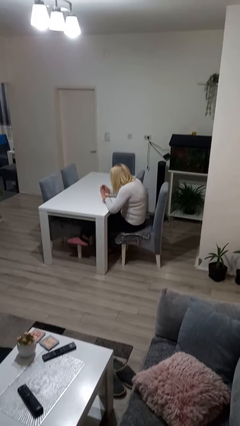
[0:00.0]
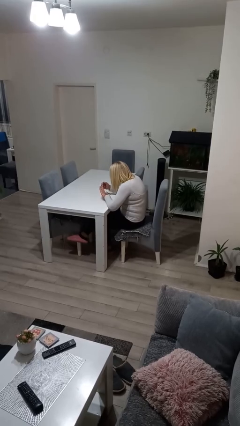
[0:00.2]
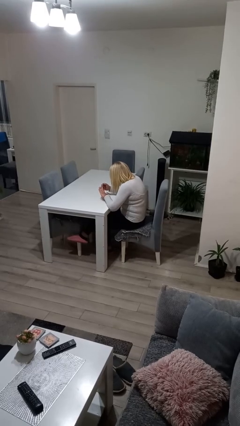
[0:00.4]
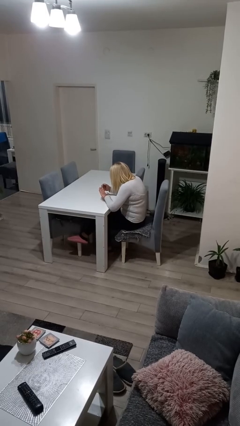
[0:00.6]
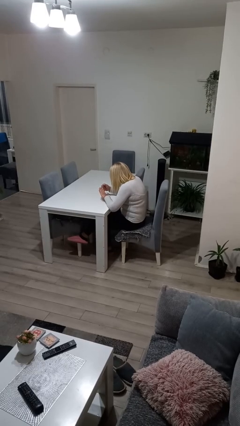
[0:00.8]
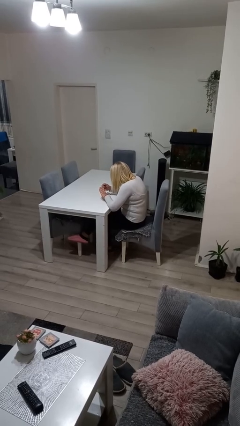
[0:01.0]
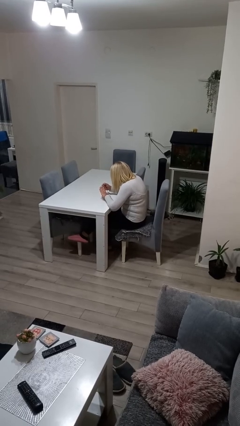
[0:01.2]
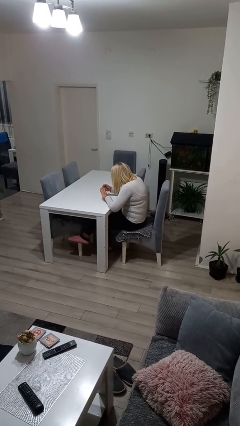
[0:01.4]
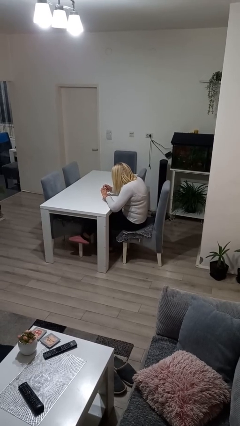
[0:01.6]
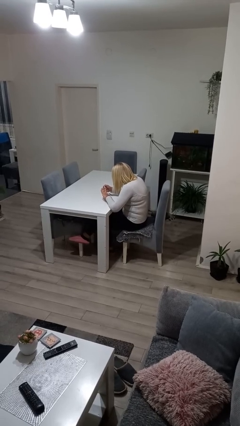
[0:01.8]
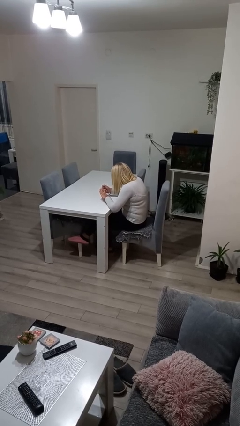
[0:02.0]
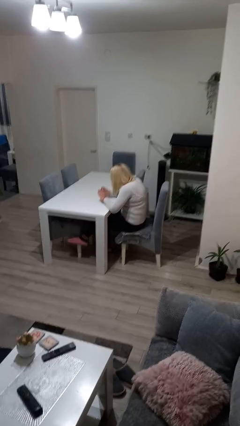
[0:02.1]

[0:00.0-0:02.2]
person clips fingernails

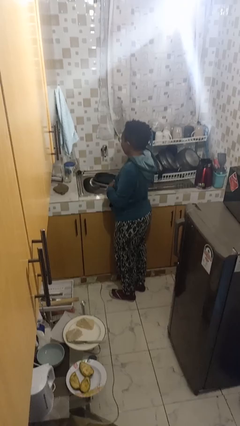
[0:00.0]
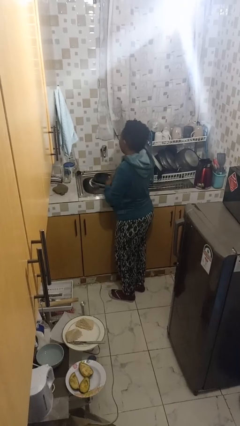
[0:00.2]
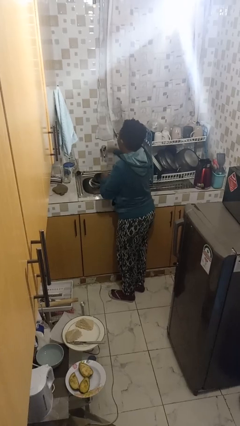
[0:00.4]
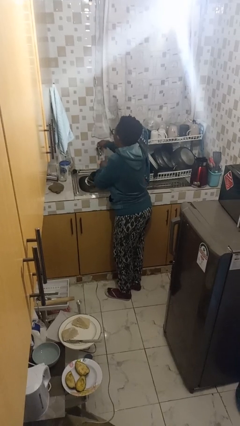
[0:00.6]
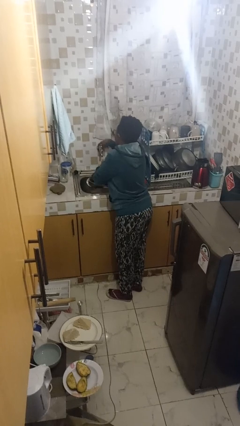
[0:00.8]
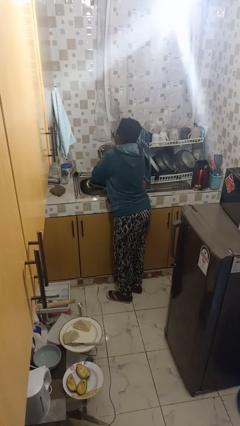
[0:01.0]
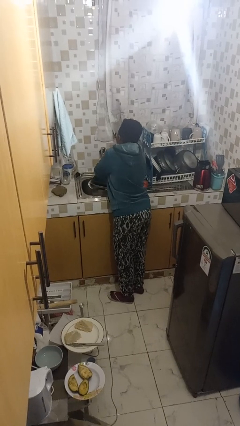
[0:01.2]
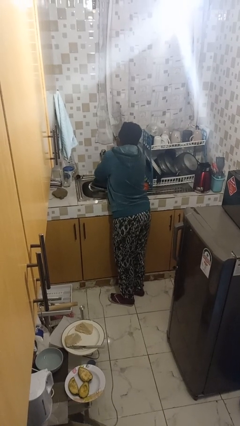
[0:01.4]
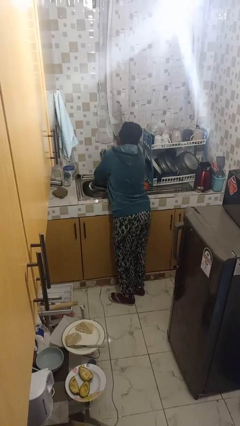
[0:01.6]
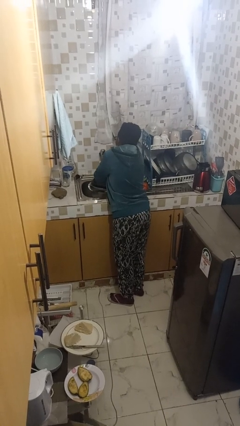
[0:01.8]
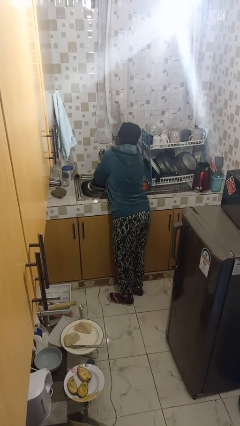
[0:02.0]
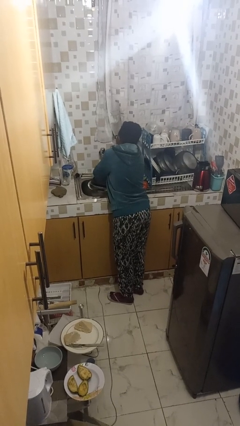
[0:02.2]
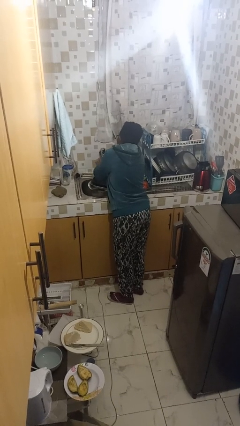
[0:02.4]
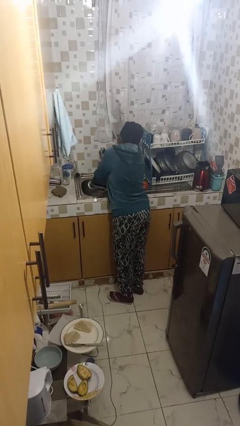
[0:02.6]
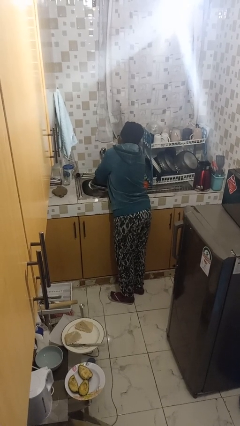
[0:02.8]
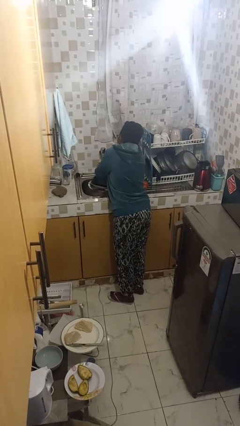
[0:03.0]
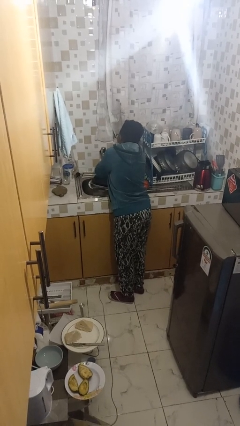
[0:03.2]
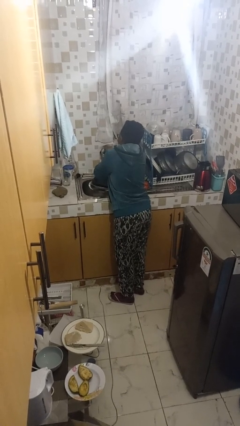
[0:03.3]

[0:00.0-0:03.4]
person washes hands

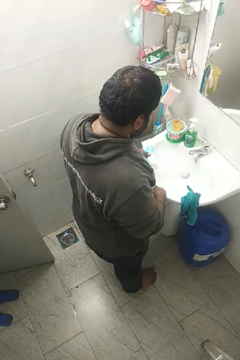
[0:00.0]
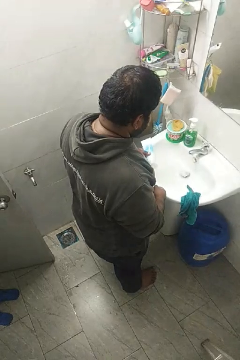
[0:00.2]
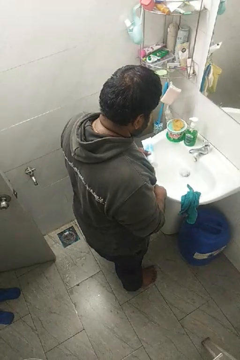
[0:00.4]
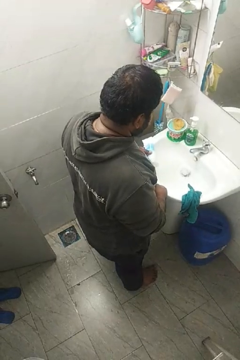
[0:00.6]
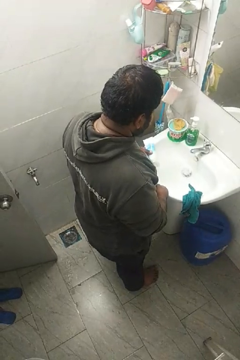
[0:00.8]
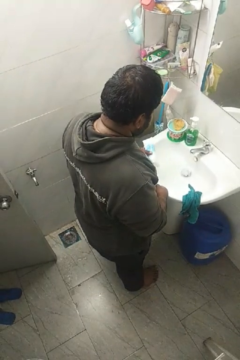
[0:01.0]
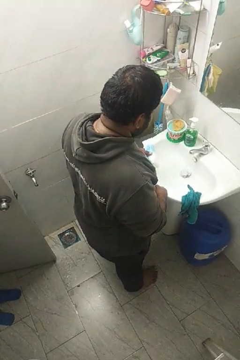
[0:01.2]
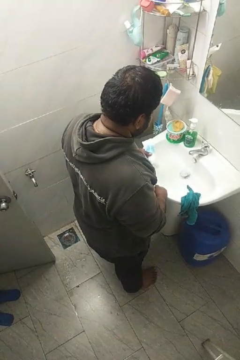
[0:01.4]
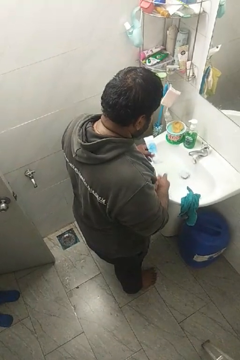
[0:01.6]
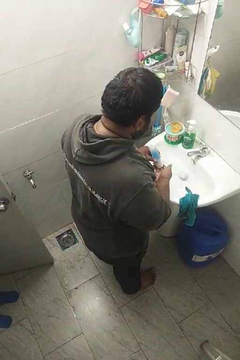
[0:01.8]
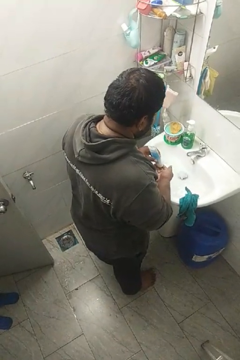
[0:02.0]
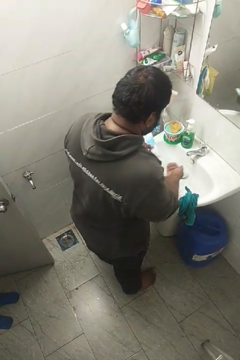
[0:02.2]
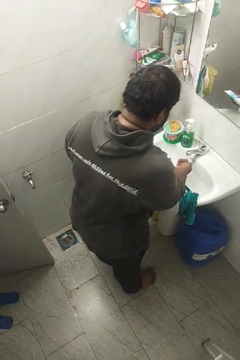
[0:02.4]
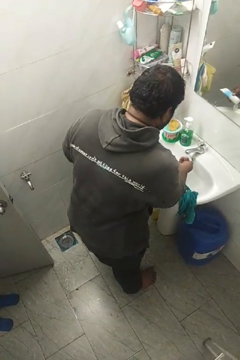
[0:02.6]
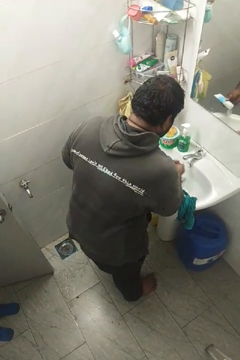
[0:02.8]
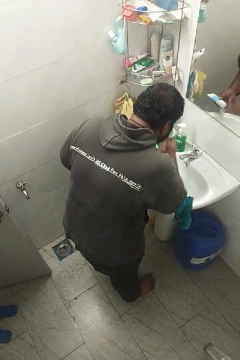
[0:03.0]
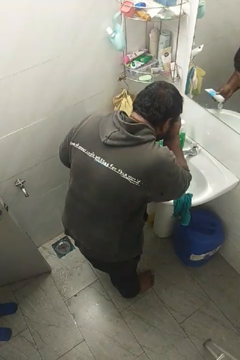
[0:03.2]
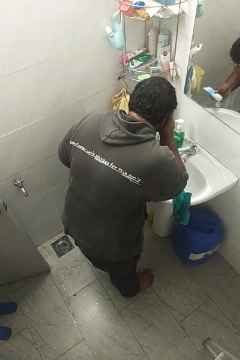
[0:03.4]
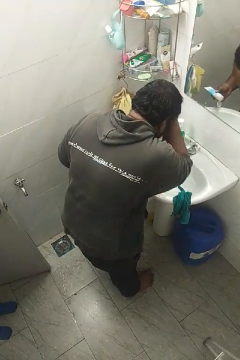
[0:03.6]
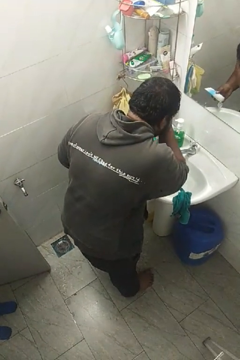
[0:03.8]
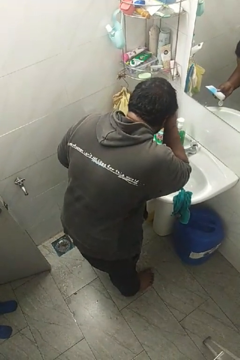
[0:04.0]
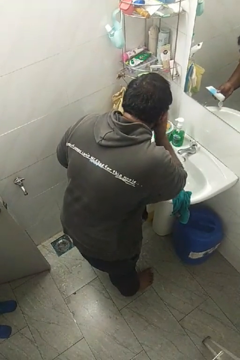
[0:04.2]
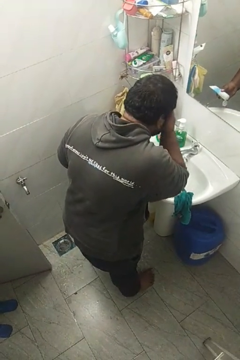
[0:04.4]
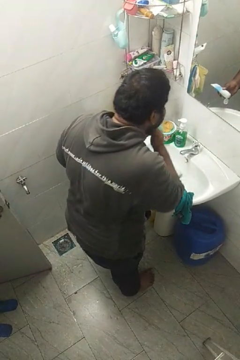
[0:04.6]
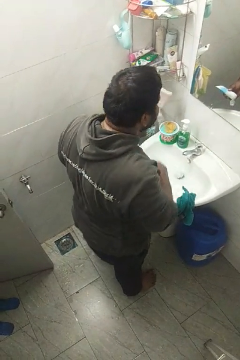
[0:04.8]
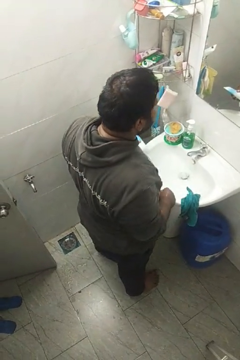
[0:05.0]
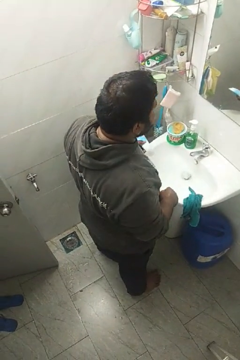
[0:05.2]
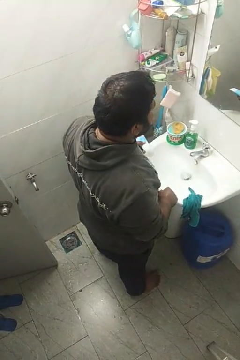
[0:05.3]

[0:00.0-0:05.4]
person washes face

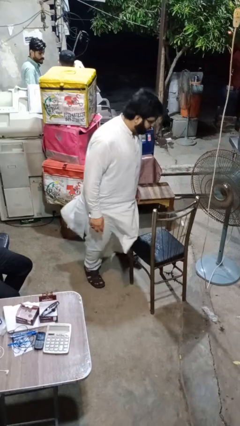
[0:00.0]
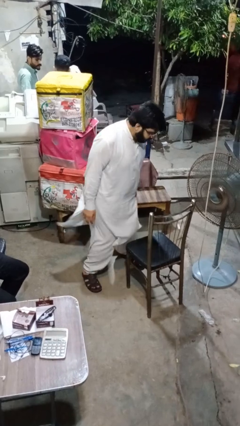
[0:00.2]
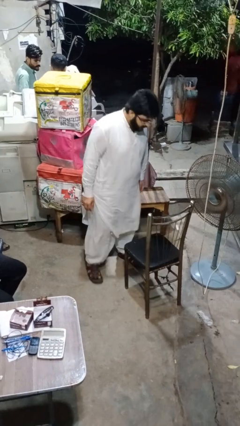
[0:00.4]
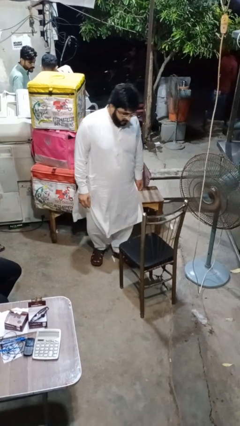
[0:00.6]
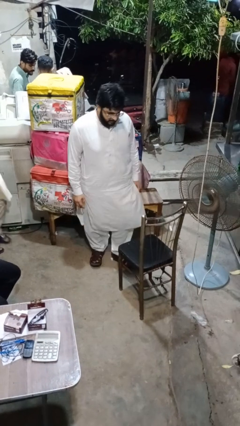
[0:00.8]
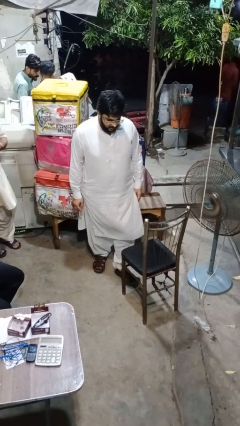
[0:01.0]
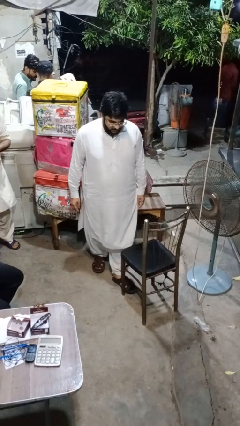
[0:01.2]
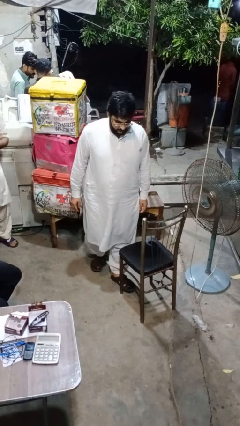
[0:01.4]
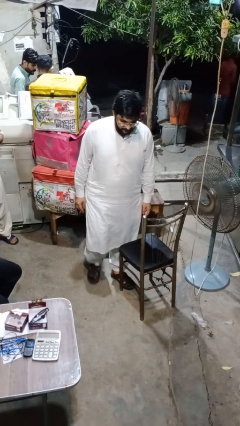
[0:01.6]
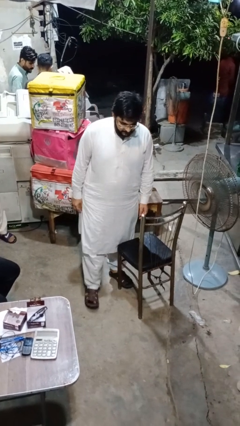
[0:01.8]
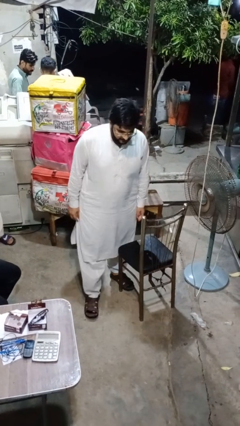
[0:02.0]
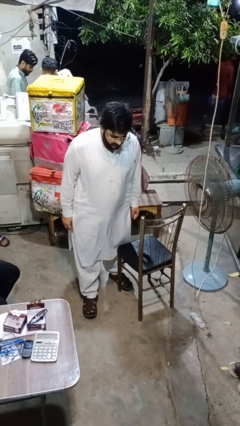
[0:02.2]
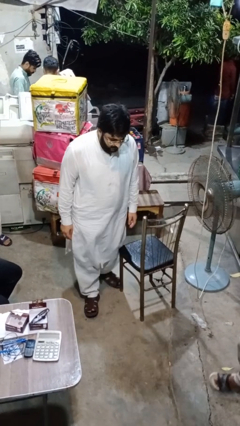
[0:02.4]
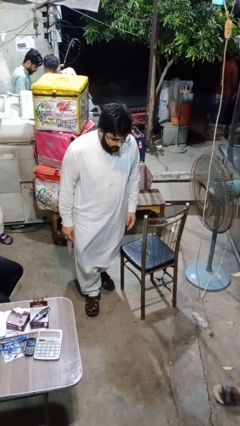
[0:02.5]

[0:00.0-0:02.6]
person trips on object on floor

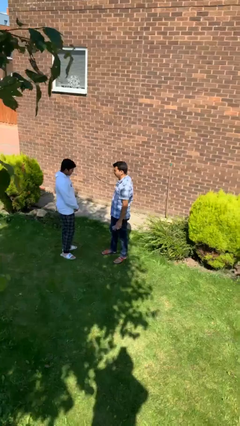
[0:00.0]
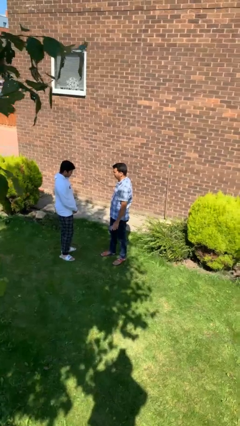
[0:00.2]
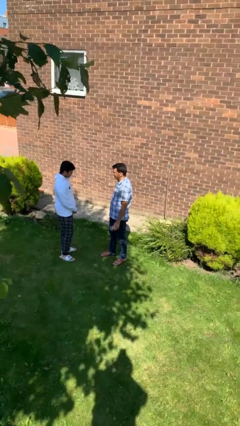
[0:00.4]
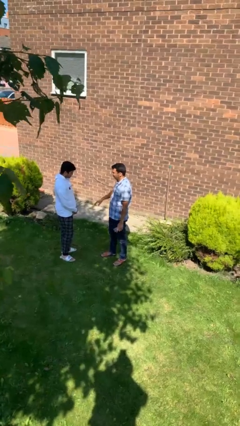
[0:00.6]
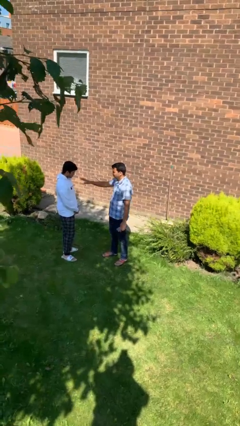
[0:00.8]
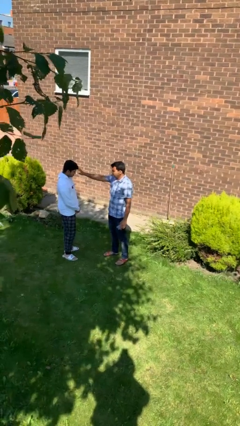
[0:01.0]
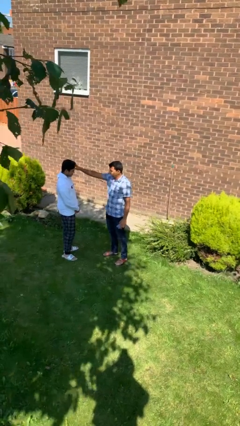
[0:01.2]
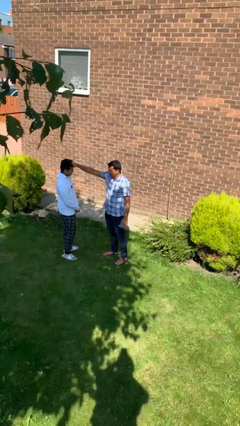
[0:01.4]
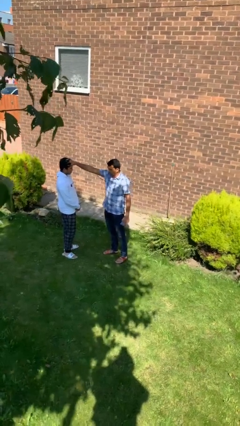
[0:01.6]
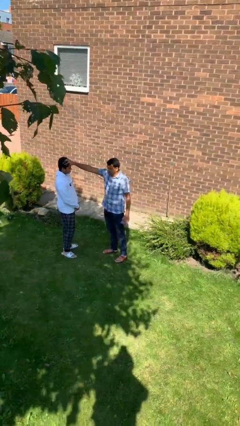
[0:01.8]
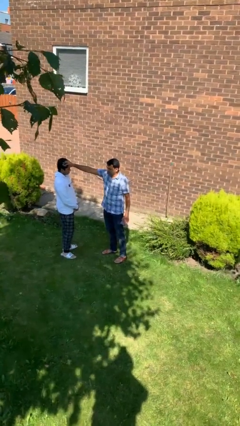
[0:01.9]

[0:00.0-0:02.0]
person grabs person by hair

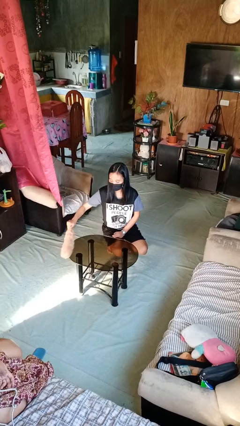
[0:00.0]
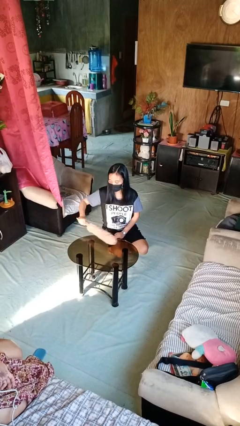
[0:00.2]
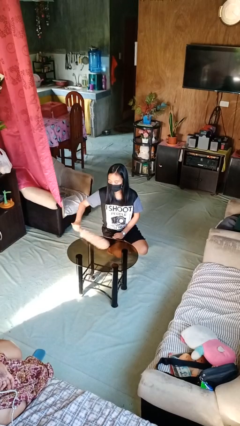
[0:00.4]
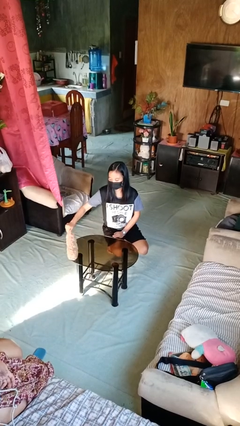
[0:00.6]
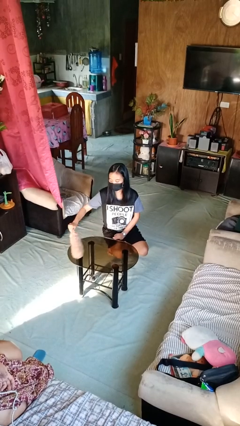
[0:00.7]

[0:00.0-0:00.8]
person dusts furniture

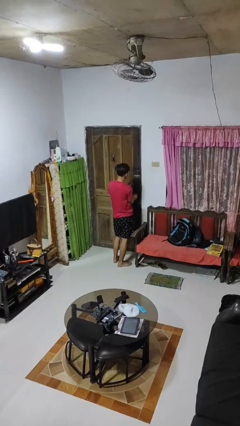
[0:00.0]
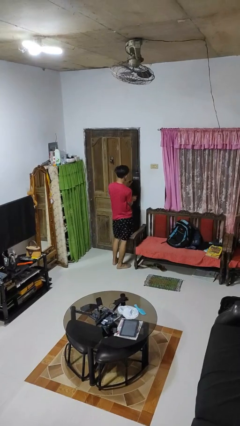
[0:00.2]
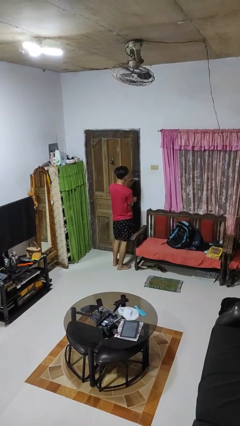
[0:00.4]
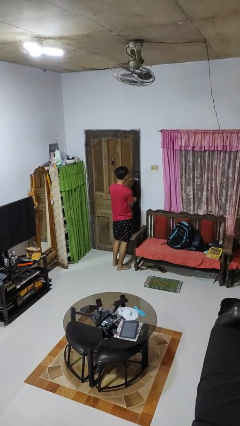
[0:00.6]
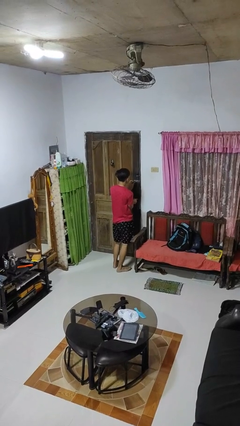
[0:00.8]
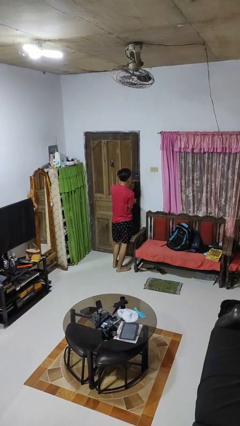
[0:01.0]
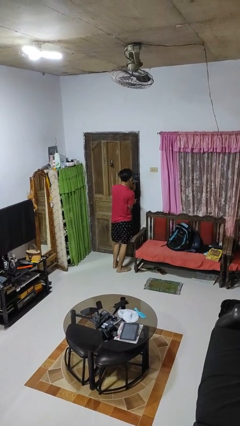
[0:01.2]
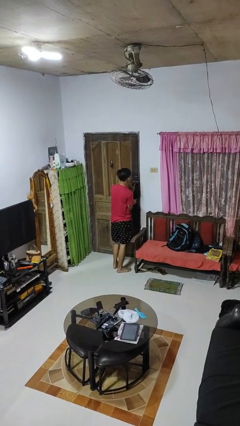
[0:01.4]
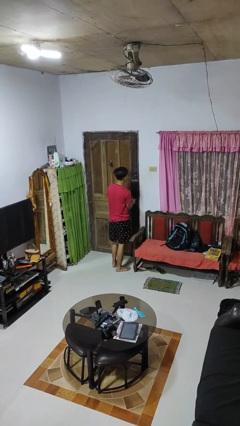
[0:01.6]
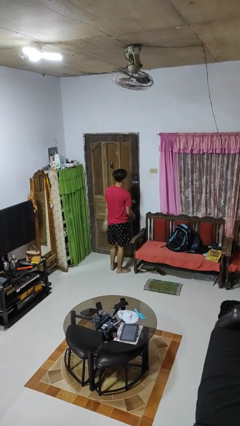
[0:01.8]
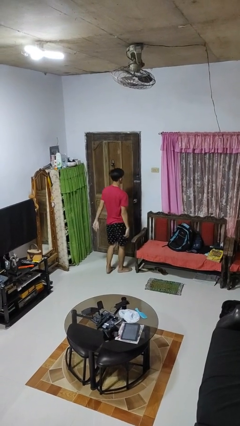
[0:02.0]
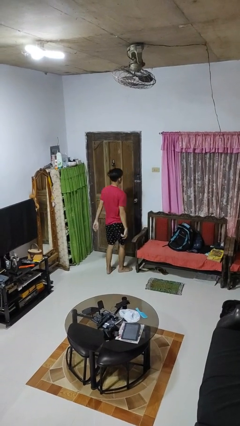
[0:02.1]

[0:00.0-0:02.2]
person locks door with keys
